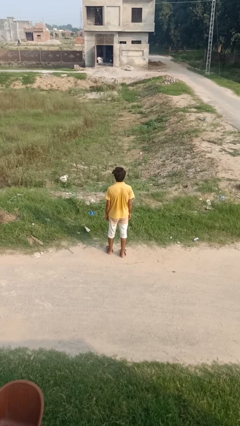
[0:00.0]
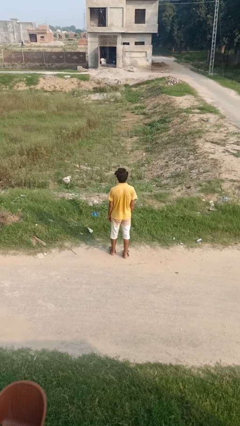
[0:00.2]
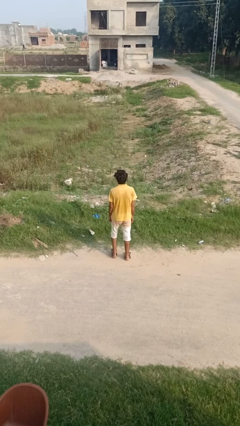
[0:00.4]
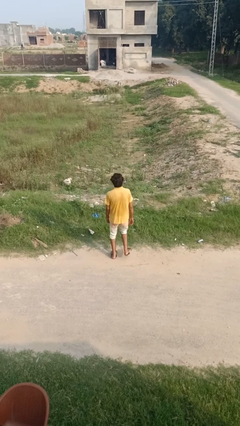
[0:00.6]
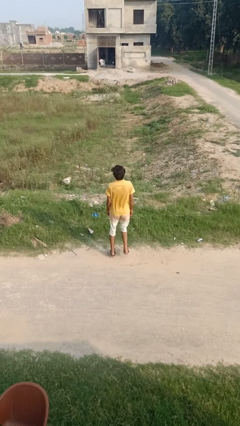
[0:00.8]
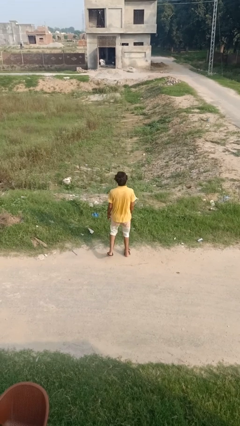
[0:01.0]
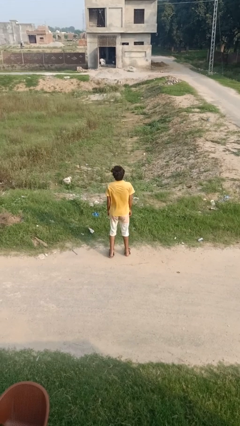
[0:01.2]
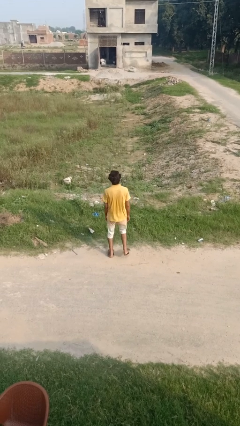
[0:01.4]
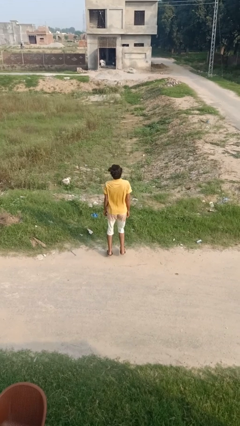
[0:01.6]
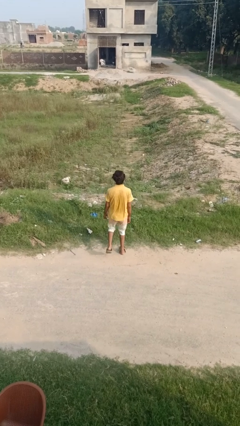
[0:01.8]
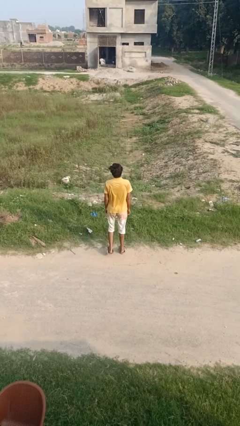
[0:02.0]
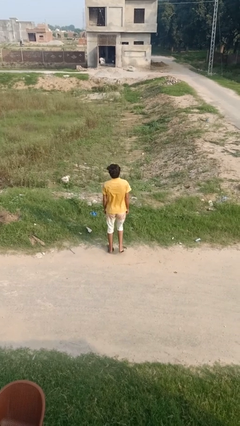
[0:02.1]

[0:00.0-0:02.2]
person dances in place

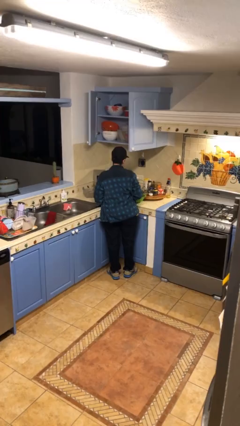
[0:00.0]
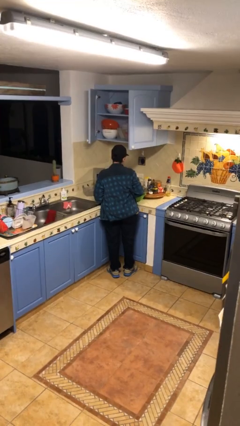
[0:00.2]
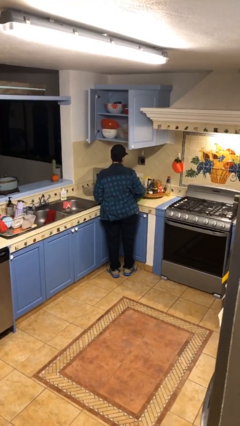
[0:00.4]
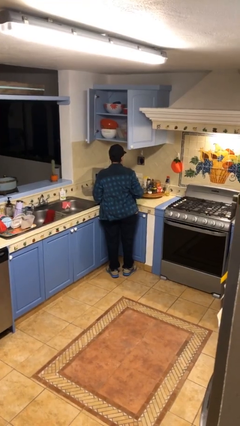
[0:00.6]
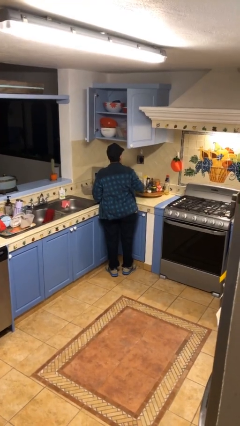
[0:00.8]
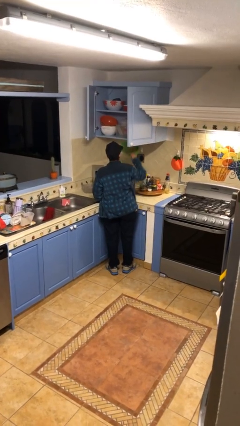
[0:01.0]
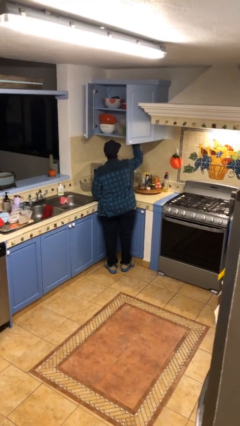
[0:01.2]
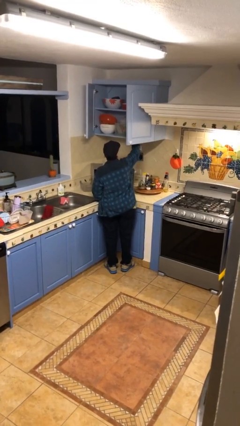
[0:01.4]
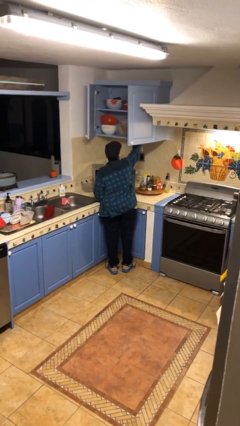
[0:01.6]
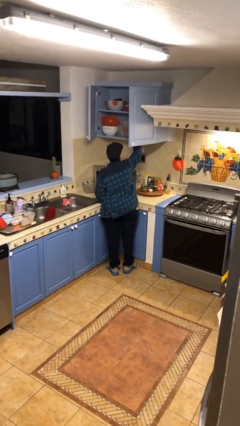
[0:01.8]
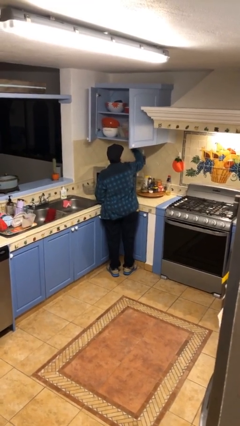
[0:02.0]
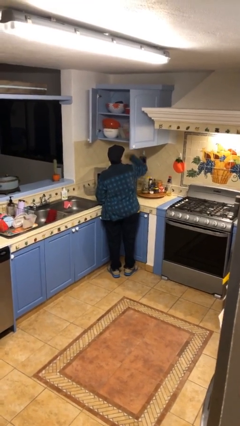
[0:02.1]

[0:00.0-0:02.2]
person puts object in cabinet

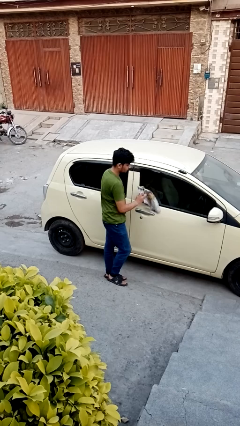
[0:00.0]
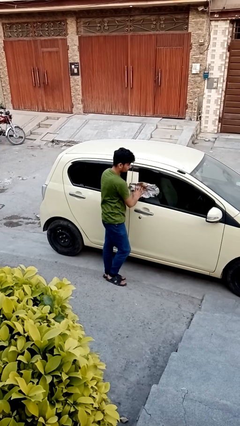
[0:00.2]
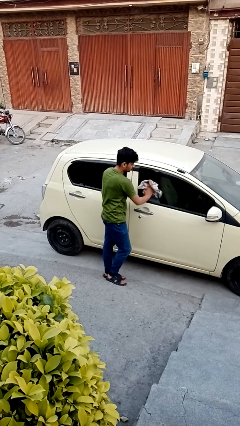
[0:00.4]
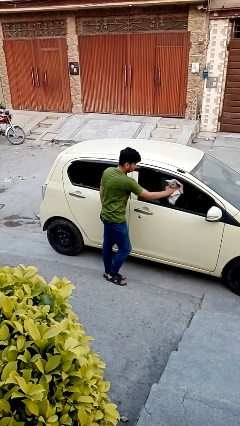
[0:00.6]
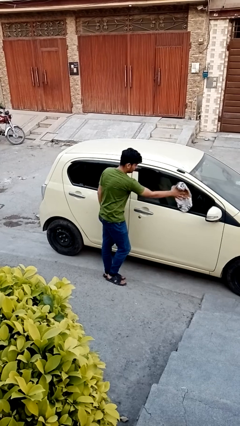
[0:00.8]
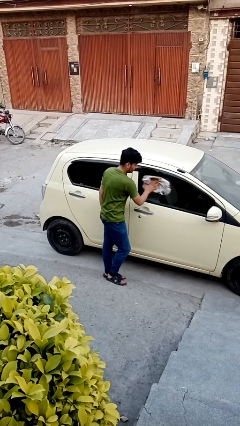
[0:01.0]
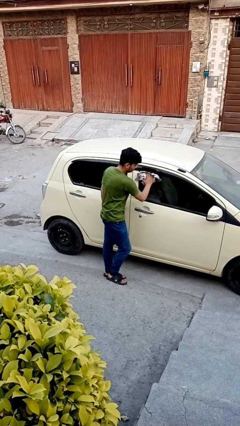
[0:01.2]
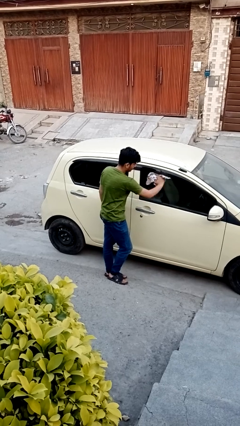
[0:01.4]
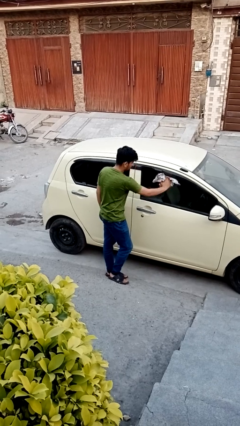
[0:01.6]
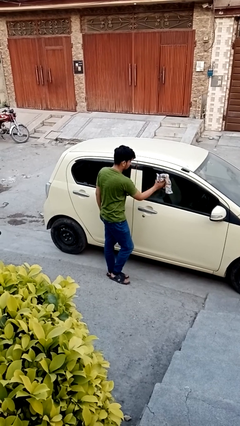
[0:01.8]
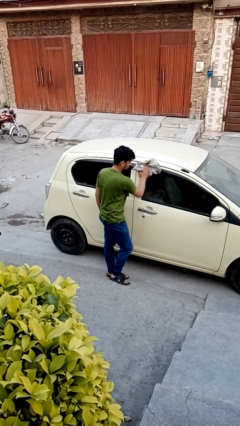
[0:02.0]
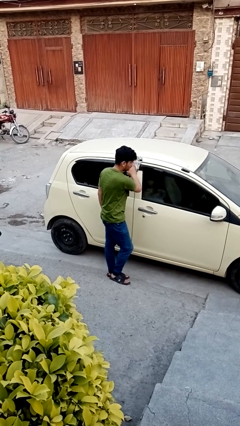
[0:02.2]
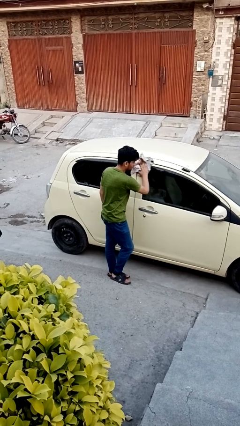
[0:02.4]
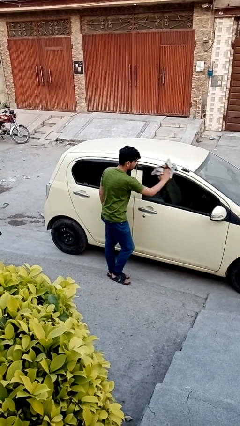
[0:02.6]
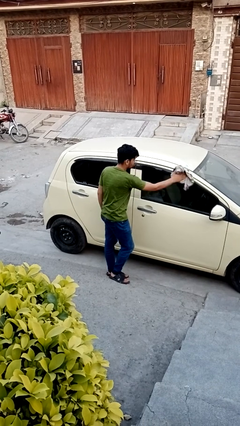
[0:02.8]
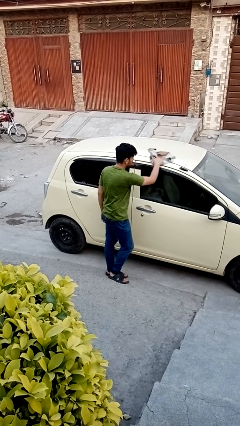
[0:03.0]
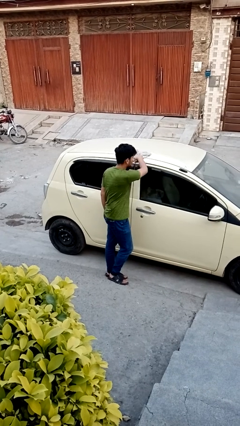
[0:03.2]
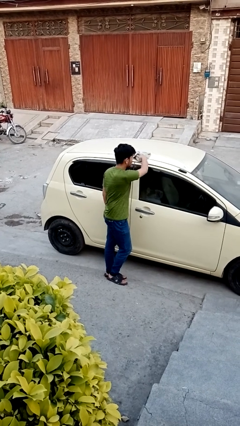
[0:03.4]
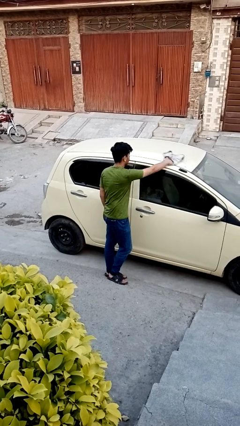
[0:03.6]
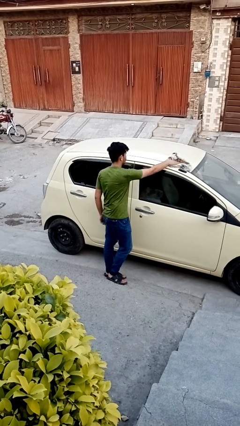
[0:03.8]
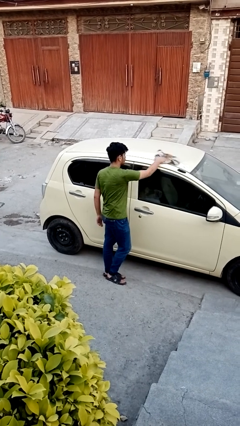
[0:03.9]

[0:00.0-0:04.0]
person polishes car with rag

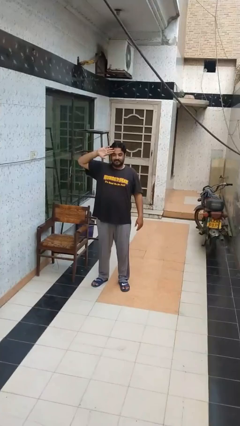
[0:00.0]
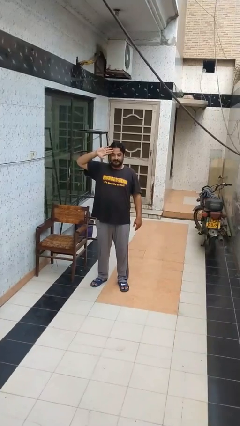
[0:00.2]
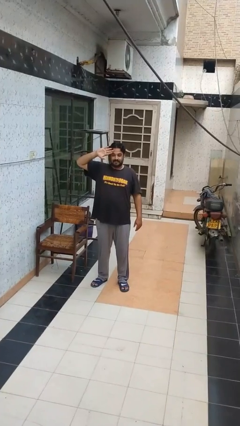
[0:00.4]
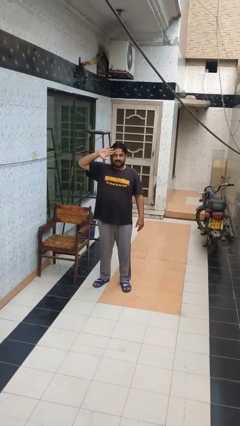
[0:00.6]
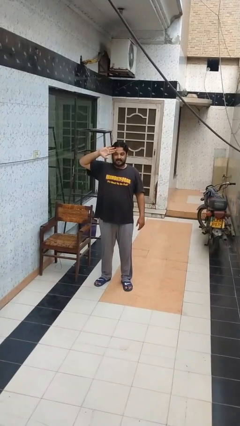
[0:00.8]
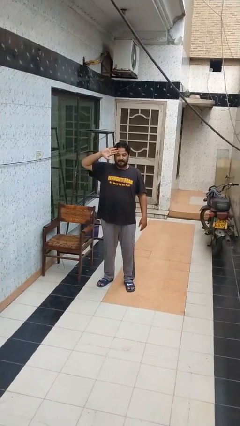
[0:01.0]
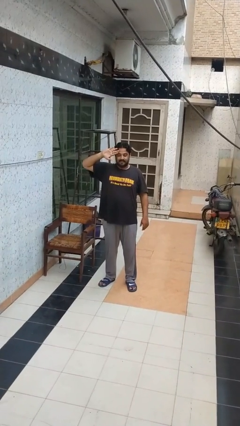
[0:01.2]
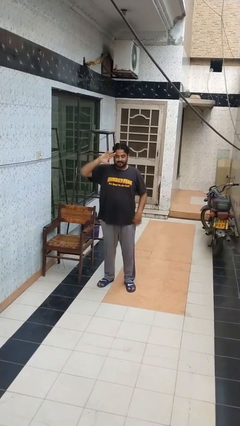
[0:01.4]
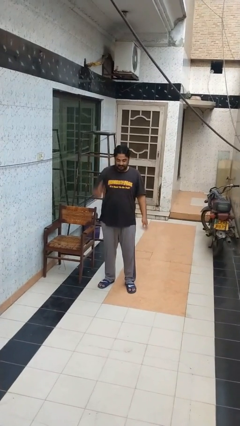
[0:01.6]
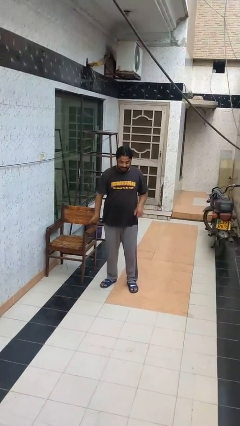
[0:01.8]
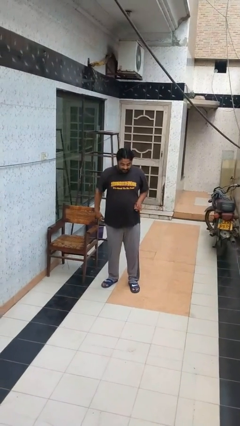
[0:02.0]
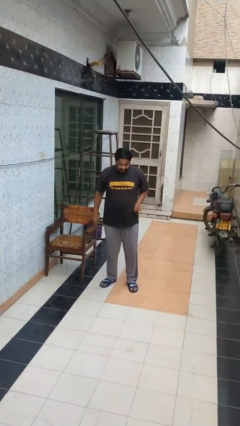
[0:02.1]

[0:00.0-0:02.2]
person salutes

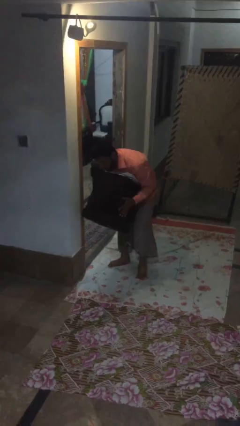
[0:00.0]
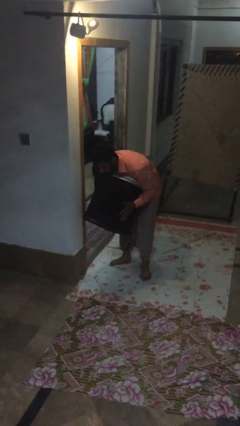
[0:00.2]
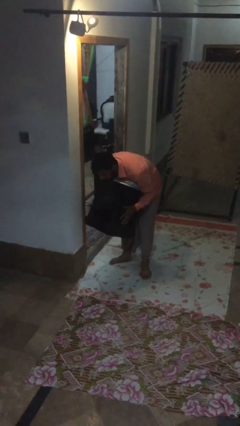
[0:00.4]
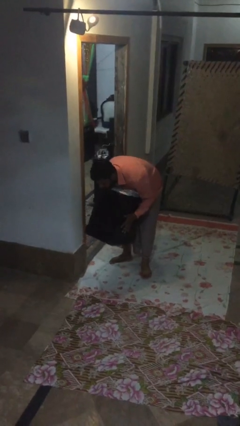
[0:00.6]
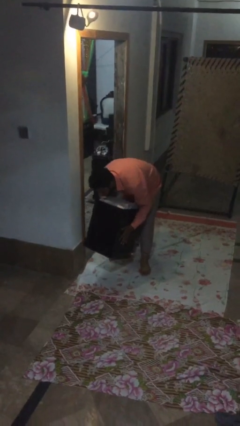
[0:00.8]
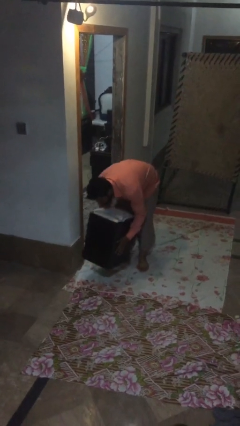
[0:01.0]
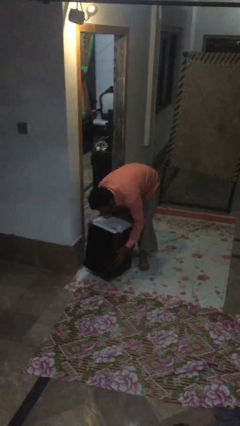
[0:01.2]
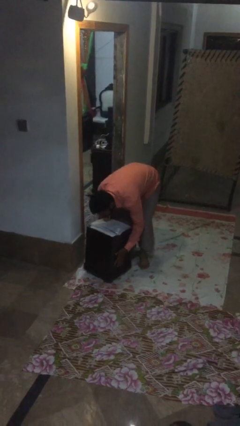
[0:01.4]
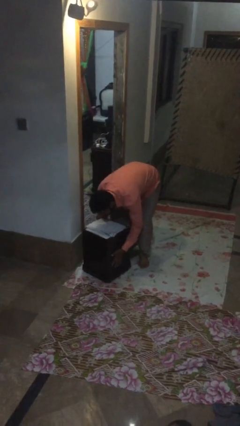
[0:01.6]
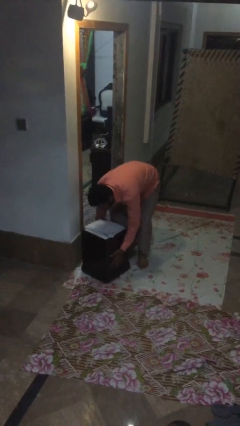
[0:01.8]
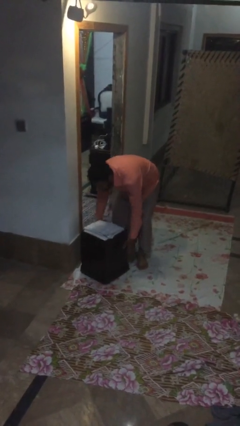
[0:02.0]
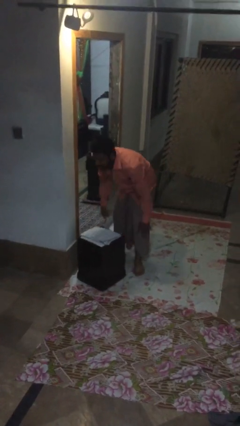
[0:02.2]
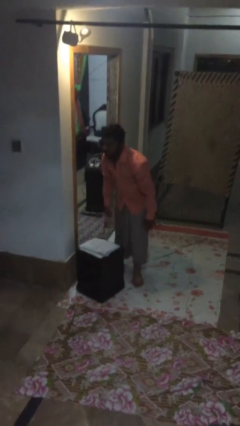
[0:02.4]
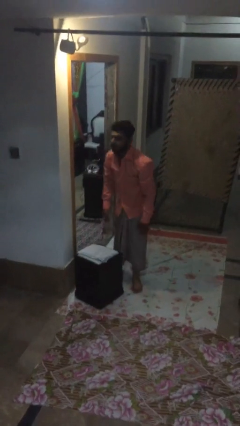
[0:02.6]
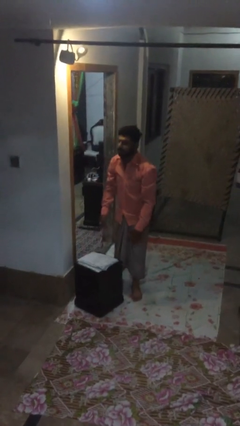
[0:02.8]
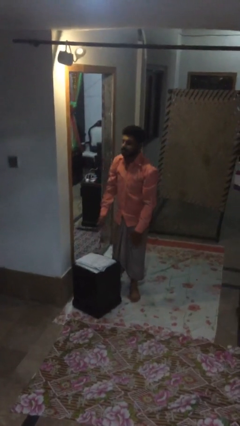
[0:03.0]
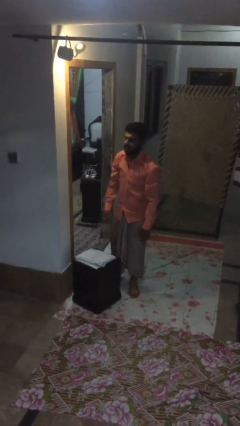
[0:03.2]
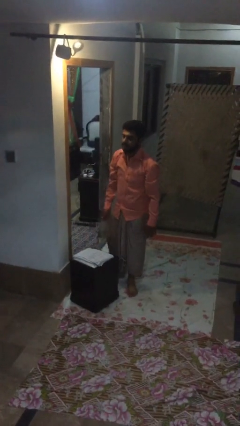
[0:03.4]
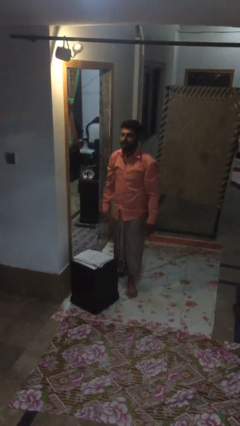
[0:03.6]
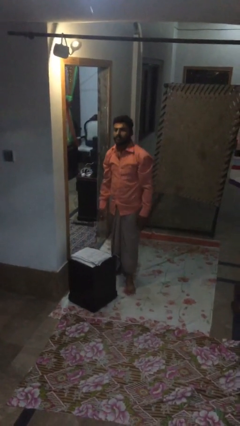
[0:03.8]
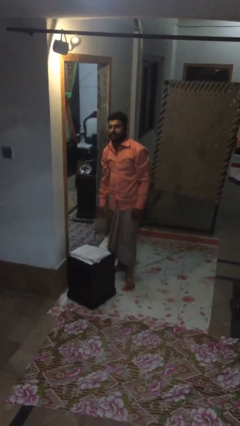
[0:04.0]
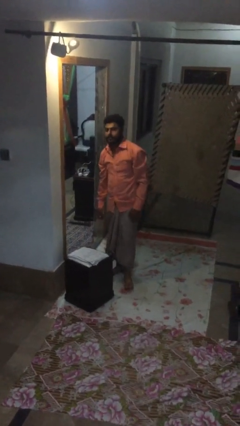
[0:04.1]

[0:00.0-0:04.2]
person puts down object on floor

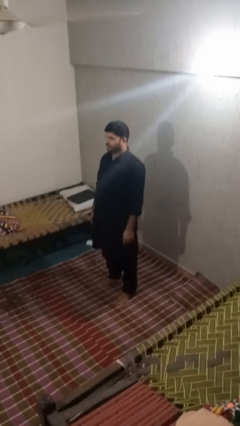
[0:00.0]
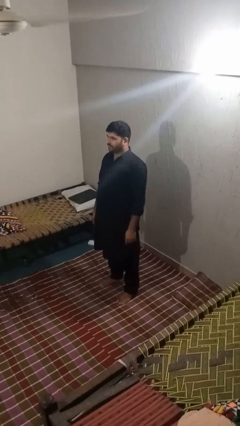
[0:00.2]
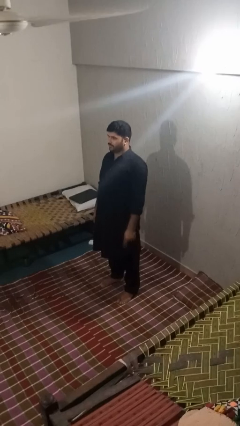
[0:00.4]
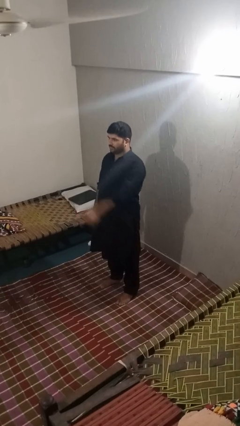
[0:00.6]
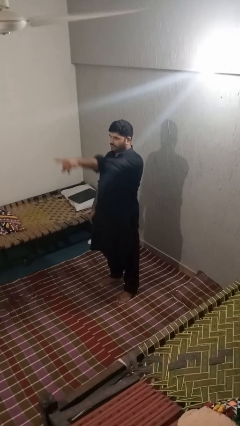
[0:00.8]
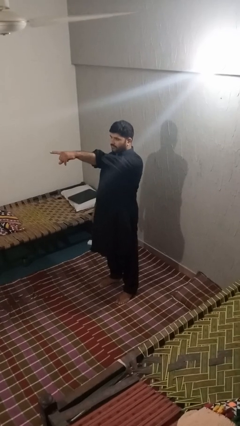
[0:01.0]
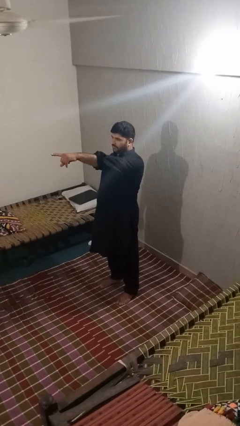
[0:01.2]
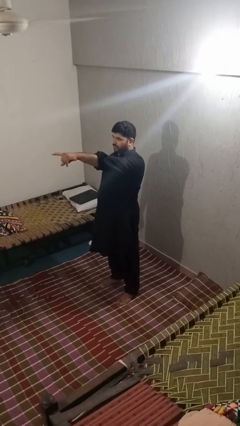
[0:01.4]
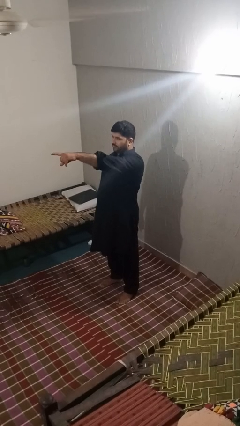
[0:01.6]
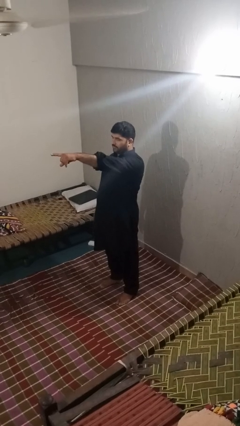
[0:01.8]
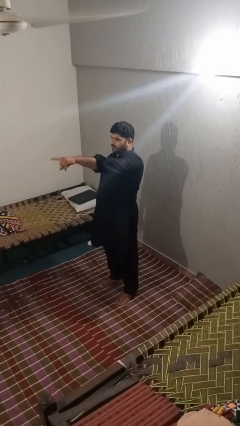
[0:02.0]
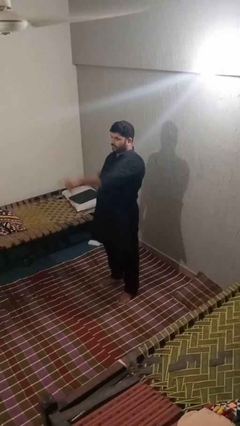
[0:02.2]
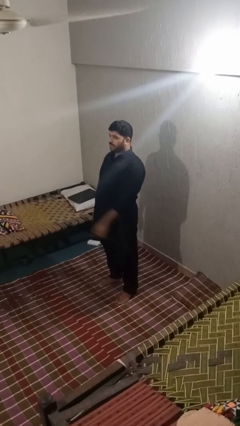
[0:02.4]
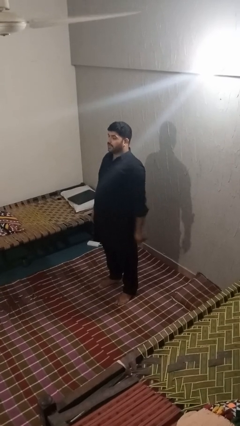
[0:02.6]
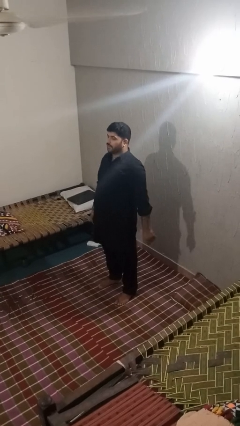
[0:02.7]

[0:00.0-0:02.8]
person points at person
